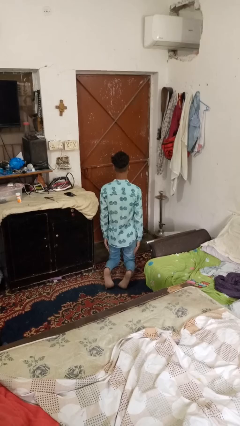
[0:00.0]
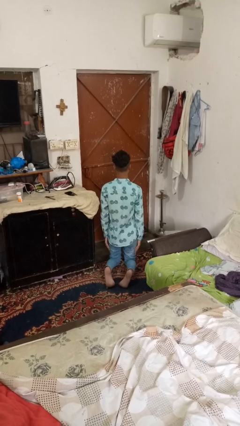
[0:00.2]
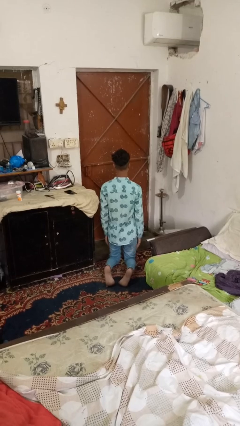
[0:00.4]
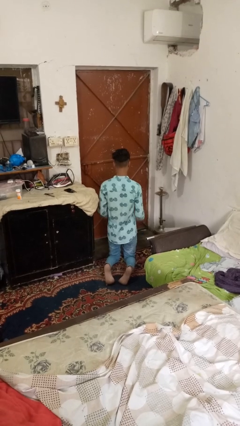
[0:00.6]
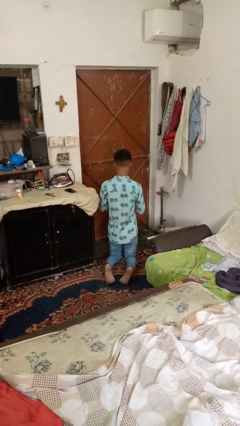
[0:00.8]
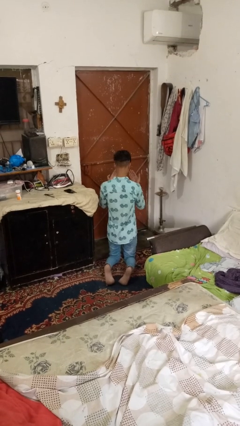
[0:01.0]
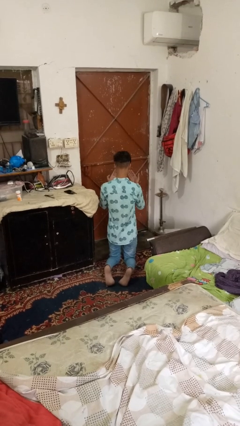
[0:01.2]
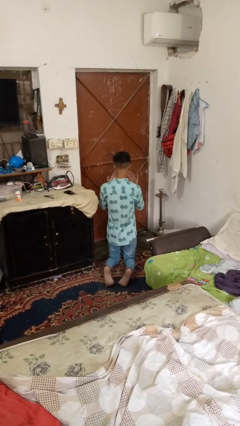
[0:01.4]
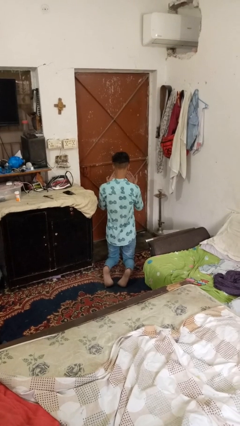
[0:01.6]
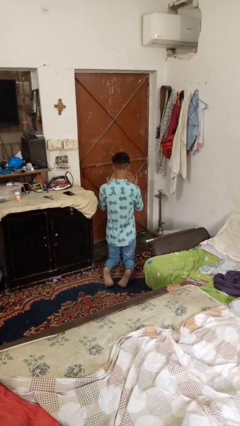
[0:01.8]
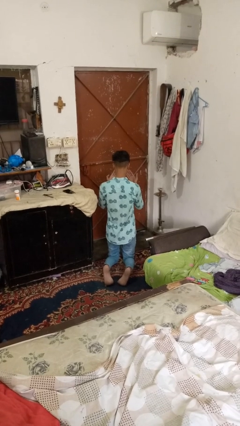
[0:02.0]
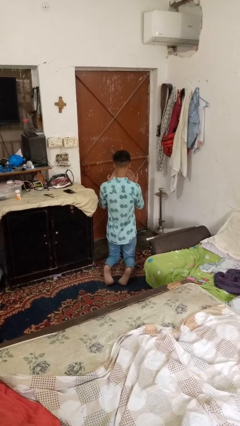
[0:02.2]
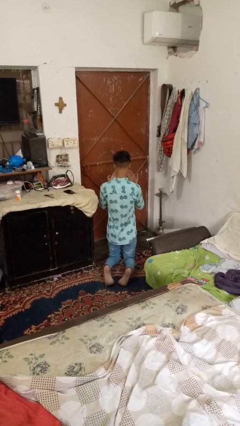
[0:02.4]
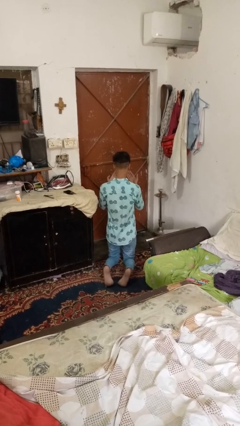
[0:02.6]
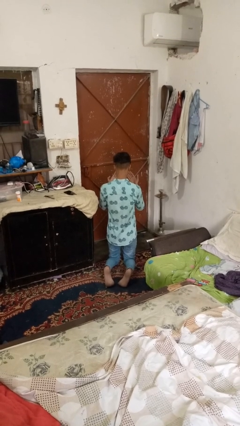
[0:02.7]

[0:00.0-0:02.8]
person prays

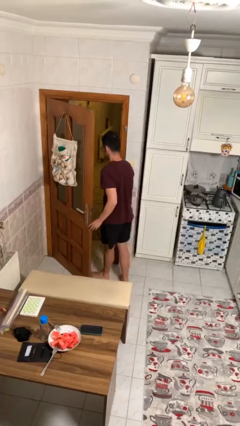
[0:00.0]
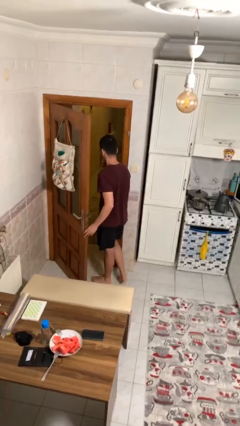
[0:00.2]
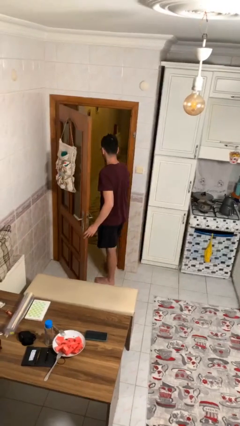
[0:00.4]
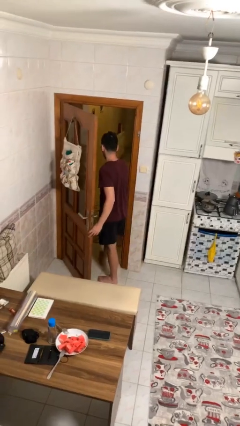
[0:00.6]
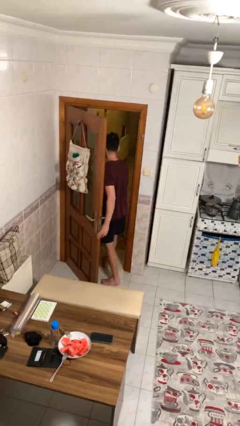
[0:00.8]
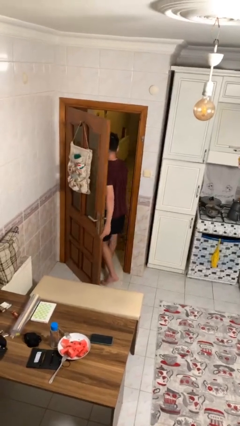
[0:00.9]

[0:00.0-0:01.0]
person exits scene through structure

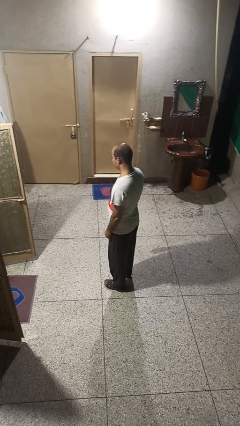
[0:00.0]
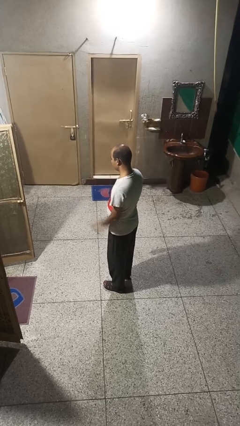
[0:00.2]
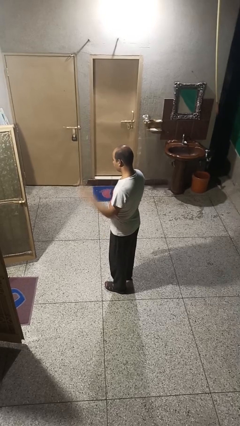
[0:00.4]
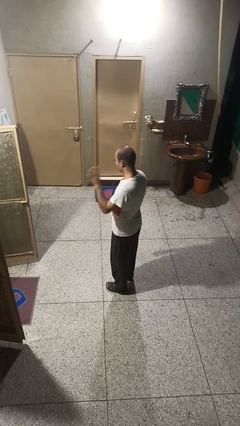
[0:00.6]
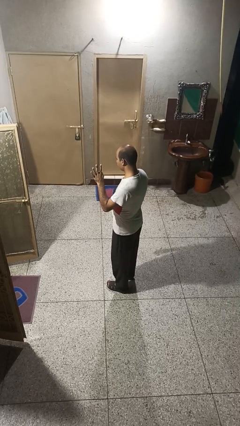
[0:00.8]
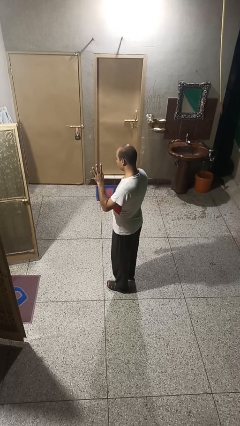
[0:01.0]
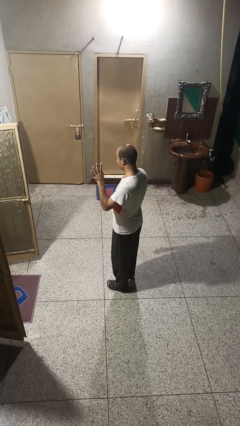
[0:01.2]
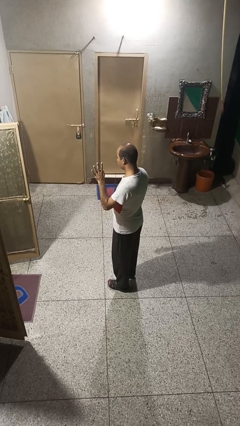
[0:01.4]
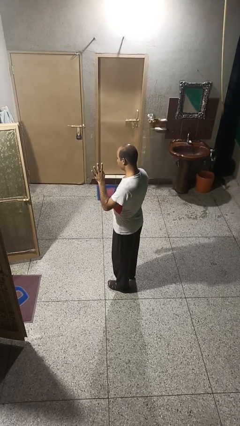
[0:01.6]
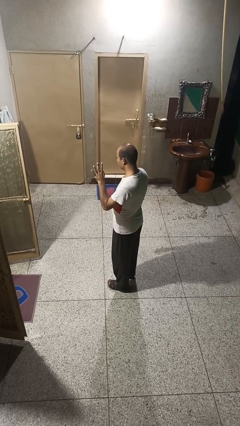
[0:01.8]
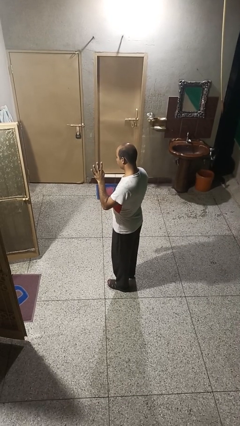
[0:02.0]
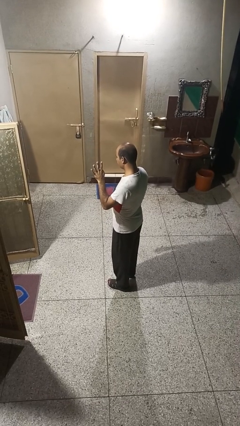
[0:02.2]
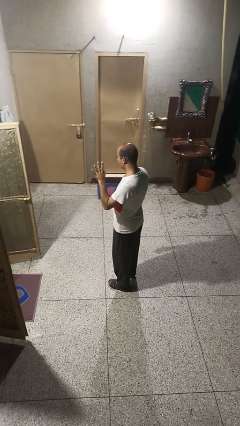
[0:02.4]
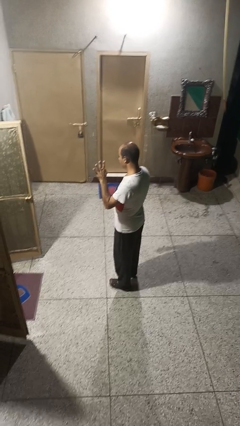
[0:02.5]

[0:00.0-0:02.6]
person gestures number four

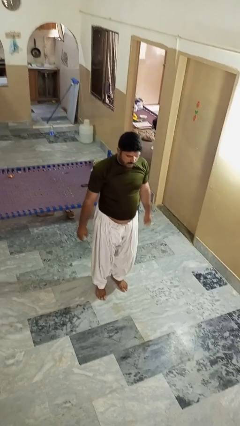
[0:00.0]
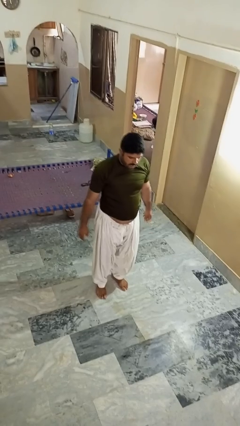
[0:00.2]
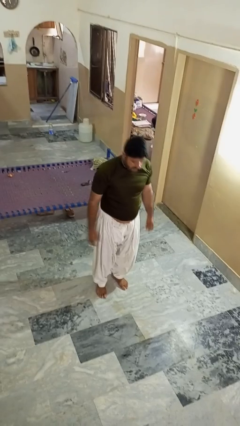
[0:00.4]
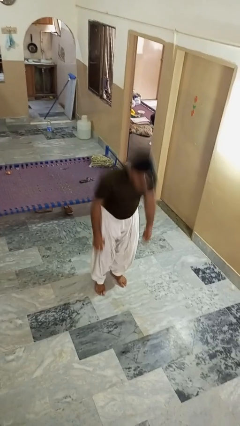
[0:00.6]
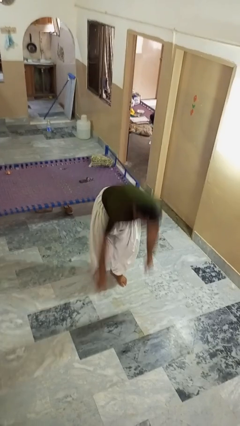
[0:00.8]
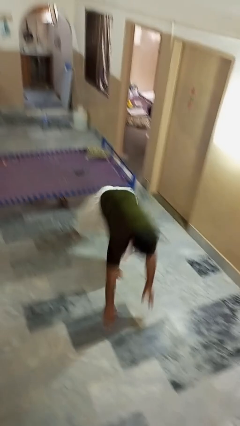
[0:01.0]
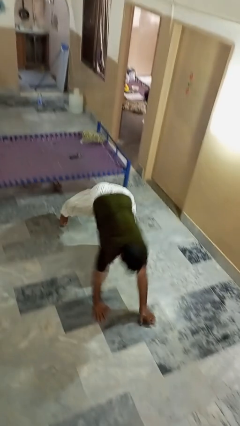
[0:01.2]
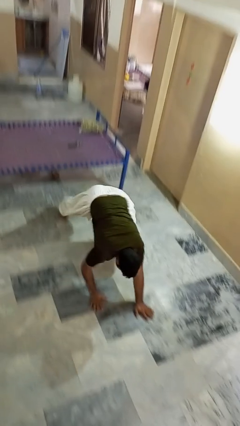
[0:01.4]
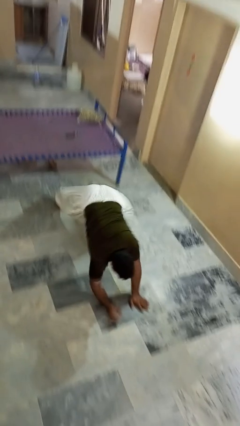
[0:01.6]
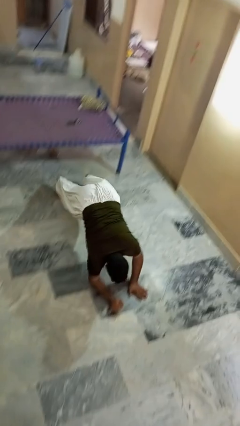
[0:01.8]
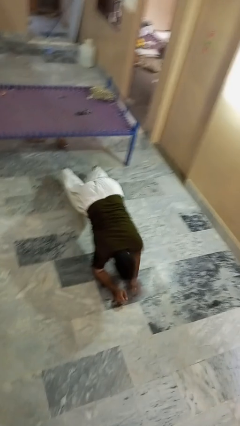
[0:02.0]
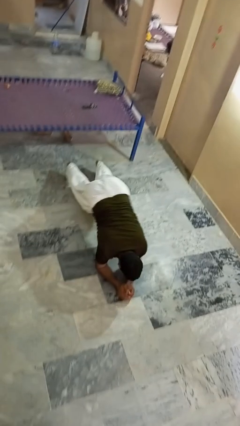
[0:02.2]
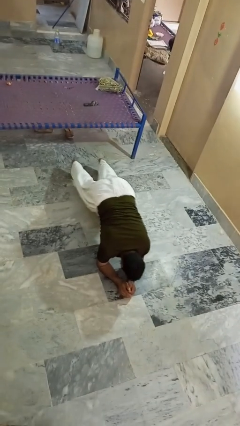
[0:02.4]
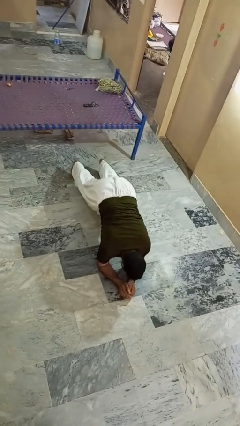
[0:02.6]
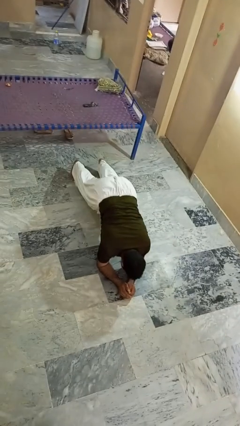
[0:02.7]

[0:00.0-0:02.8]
person exercises with plank

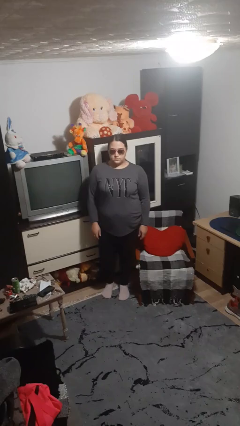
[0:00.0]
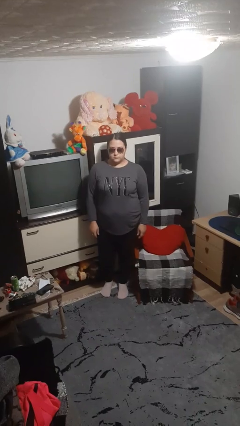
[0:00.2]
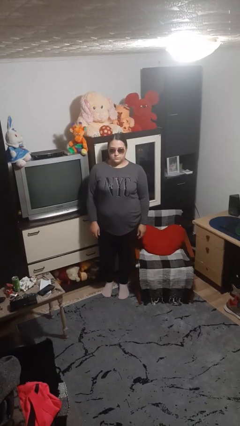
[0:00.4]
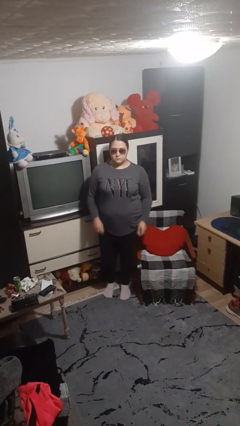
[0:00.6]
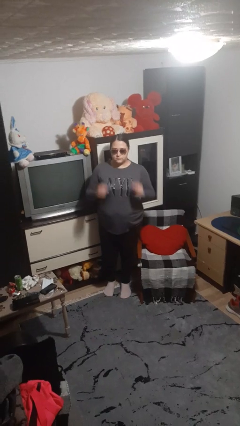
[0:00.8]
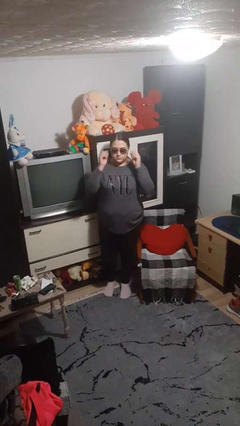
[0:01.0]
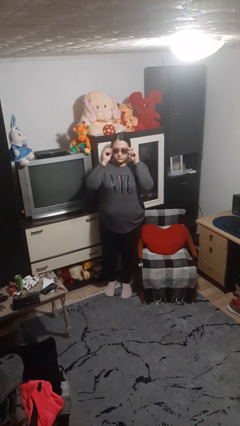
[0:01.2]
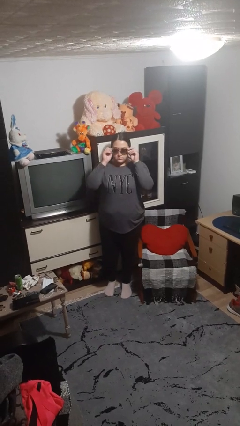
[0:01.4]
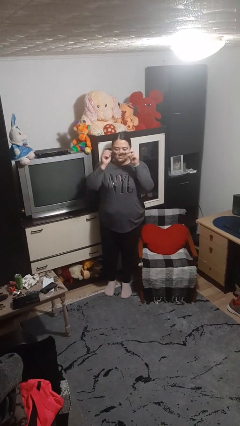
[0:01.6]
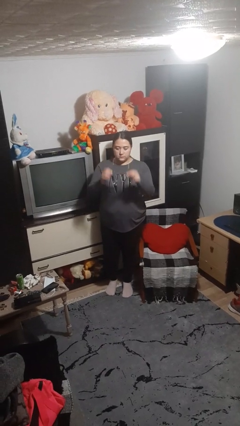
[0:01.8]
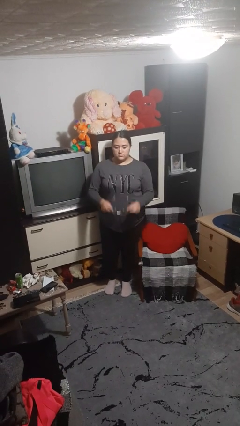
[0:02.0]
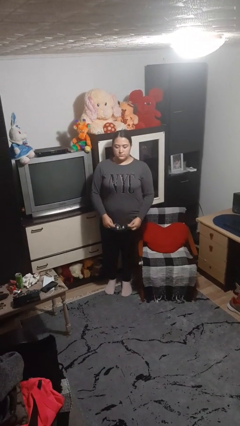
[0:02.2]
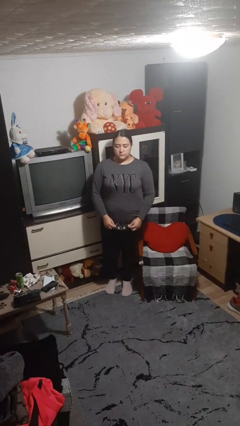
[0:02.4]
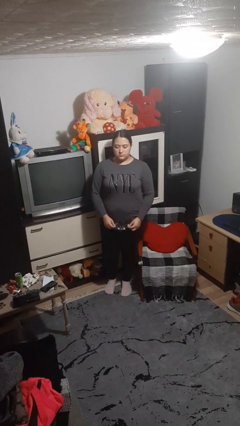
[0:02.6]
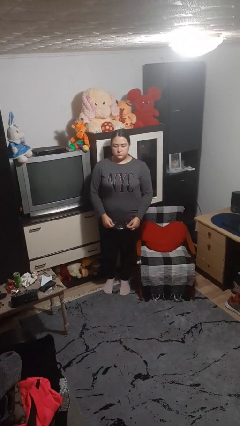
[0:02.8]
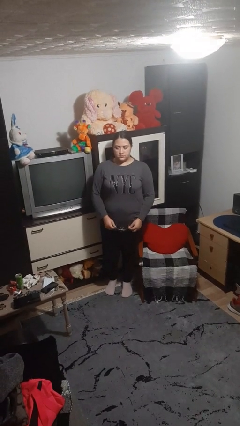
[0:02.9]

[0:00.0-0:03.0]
person takes off sunglasses

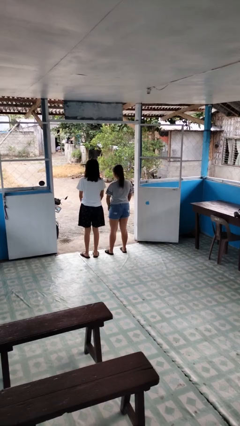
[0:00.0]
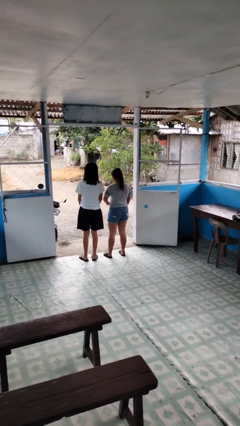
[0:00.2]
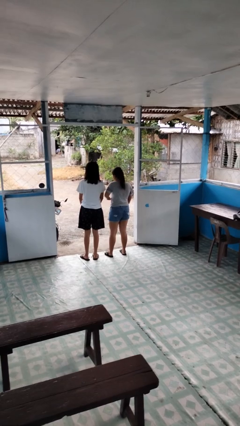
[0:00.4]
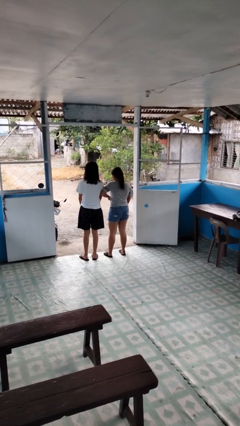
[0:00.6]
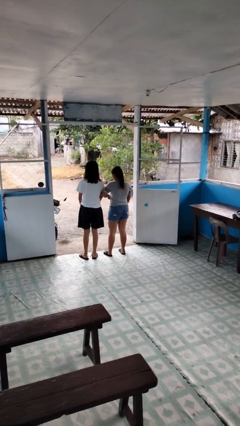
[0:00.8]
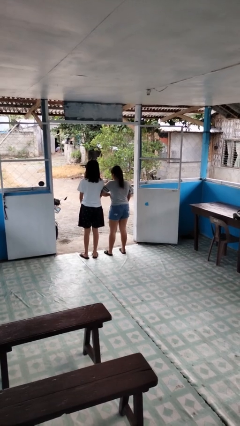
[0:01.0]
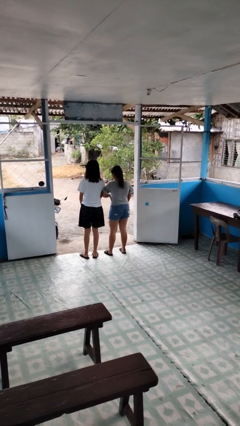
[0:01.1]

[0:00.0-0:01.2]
person nudges person with elbow

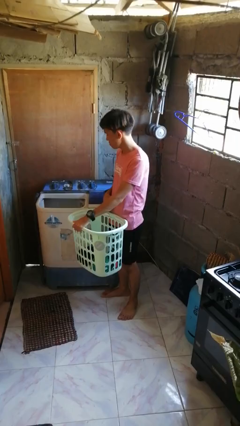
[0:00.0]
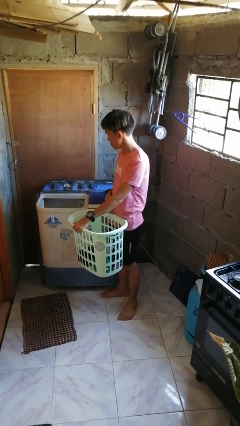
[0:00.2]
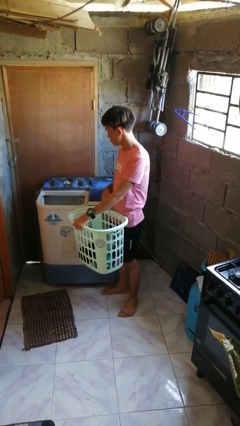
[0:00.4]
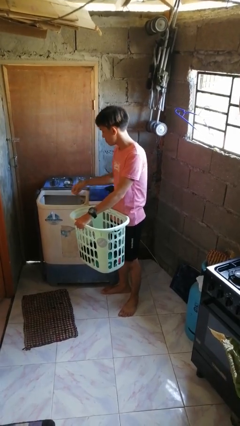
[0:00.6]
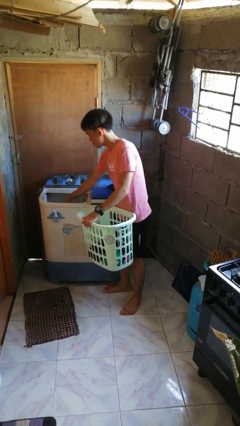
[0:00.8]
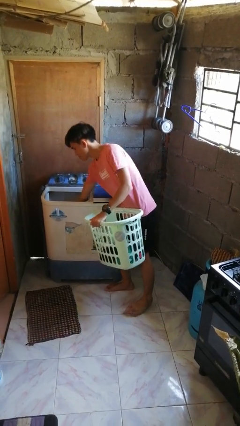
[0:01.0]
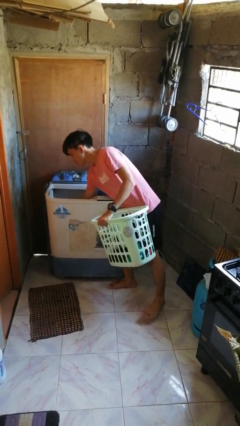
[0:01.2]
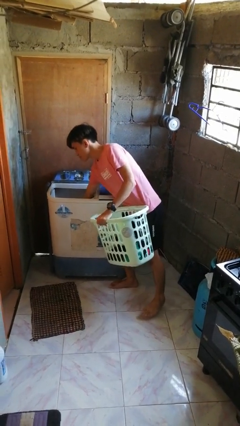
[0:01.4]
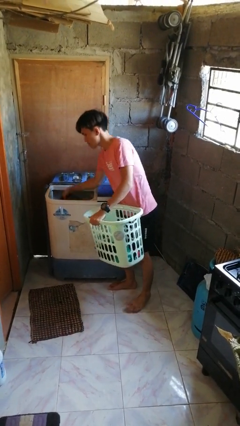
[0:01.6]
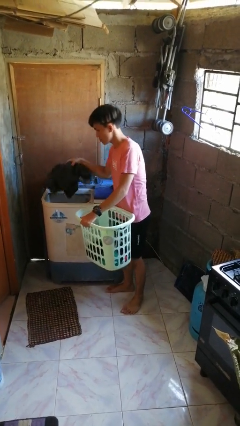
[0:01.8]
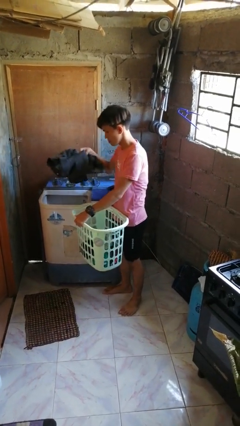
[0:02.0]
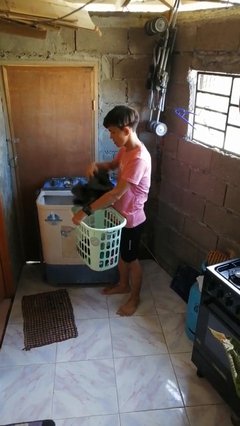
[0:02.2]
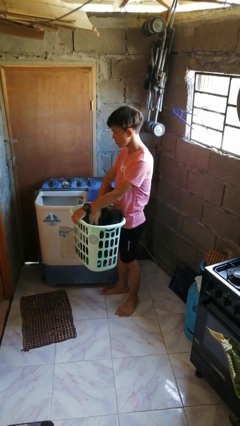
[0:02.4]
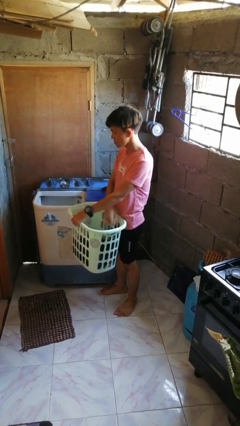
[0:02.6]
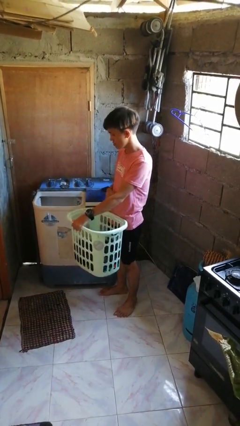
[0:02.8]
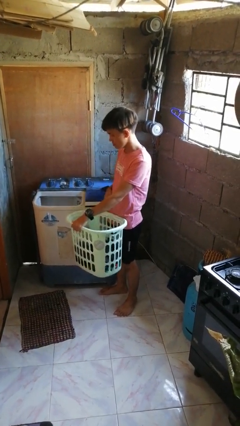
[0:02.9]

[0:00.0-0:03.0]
person loads clotheswasher

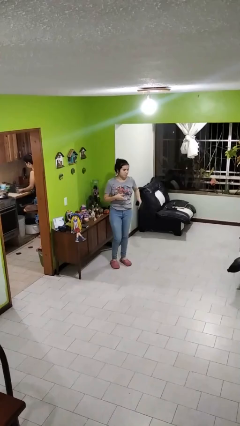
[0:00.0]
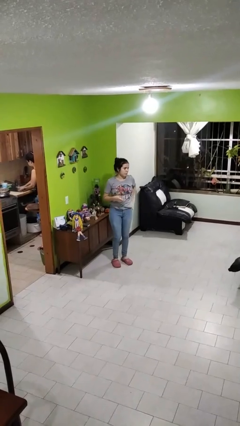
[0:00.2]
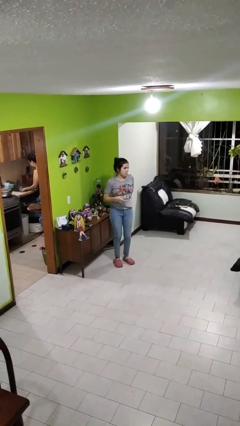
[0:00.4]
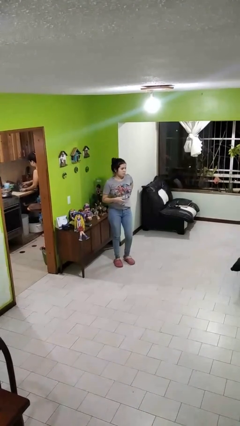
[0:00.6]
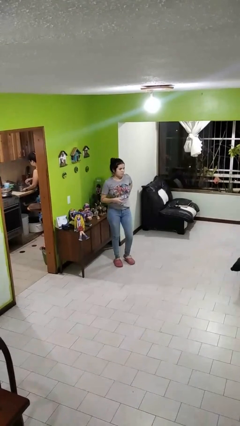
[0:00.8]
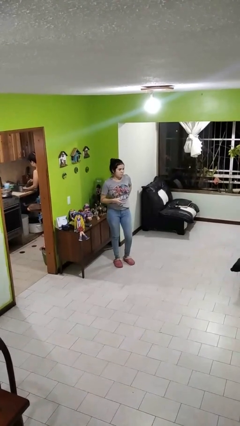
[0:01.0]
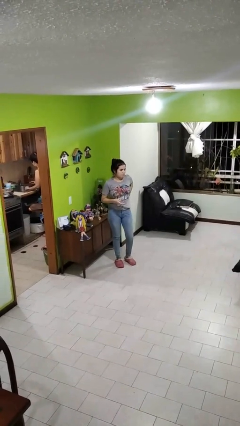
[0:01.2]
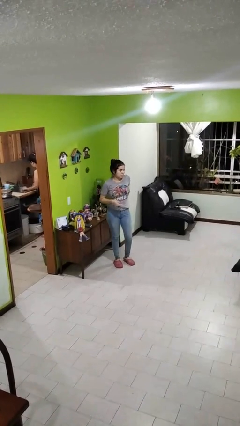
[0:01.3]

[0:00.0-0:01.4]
person puts phone into pocket
